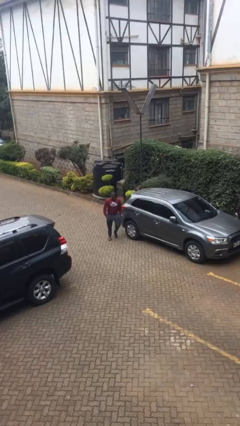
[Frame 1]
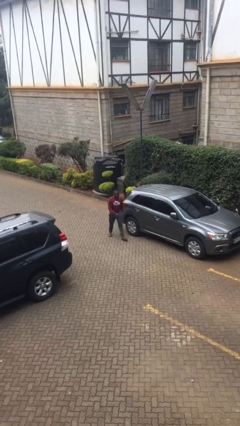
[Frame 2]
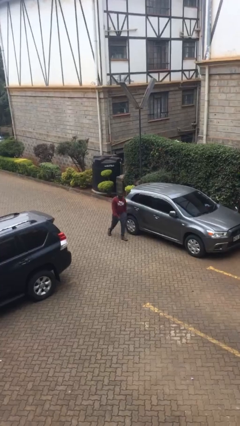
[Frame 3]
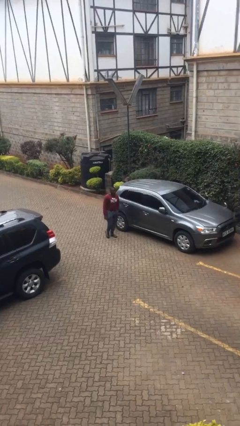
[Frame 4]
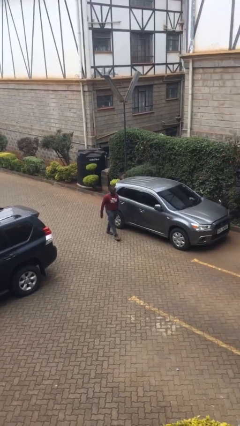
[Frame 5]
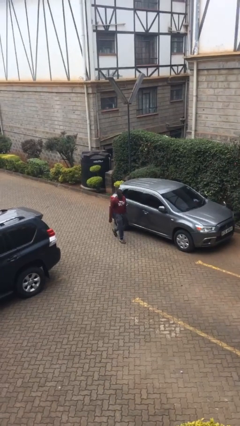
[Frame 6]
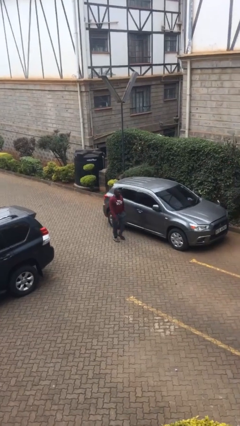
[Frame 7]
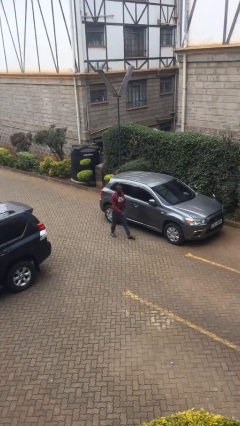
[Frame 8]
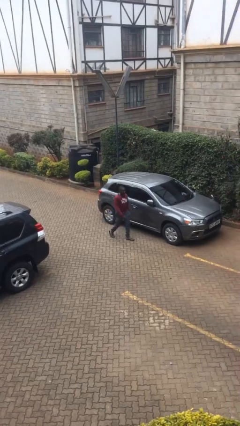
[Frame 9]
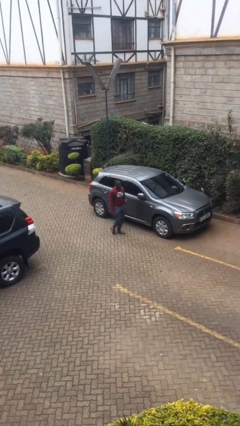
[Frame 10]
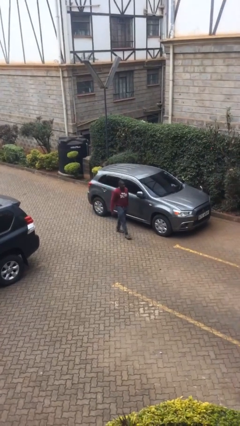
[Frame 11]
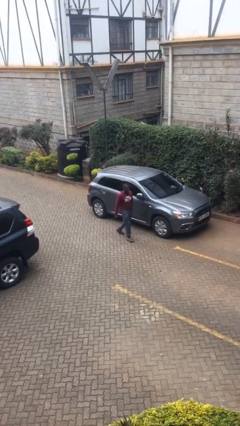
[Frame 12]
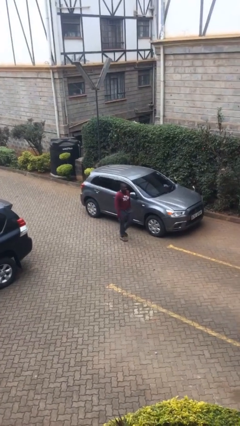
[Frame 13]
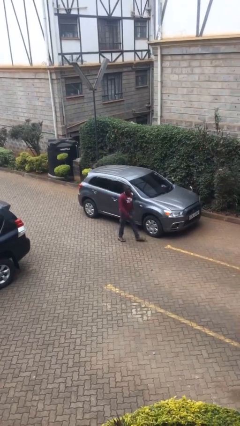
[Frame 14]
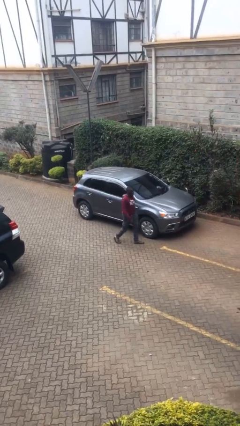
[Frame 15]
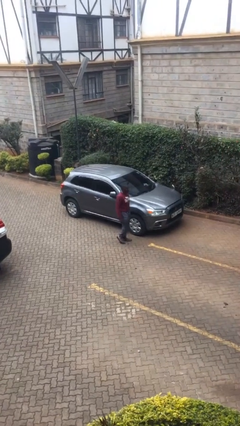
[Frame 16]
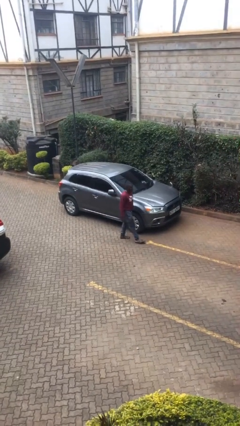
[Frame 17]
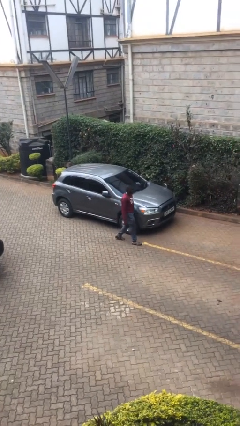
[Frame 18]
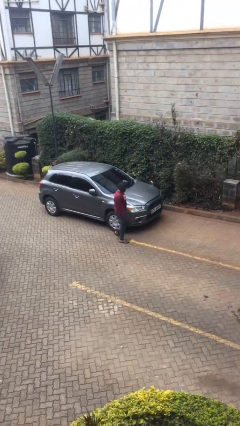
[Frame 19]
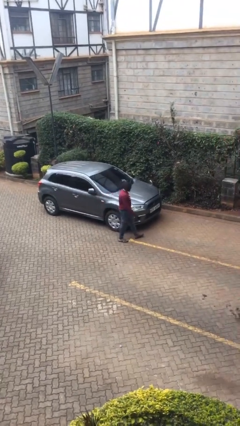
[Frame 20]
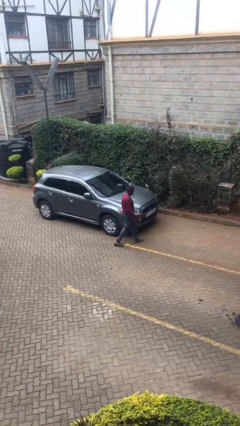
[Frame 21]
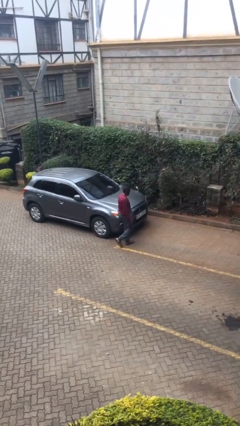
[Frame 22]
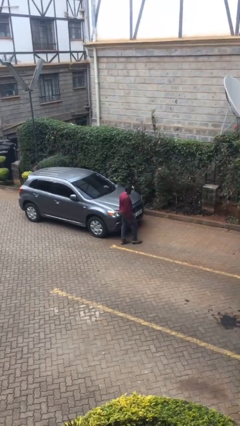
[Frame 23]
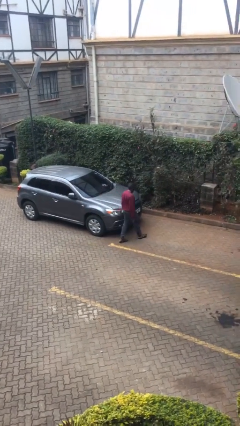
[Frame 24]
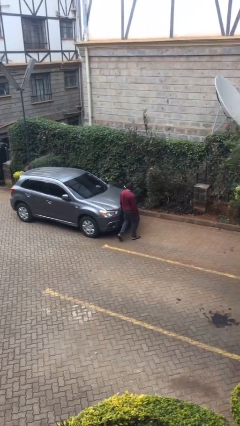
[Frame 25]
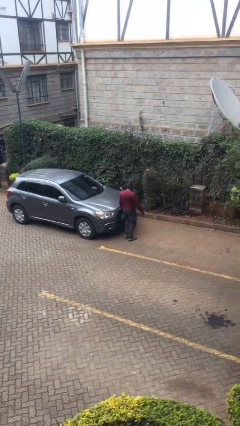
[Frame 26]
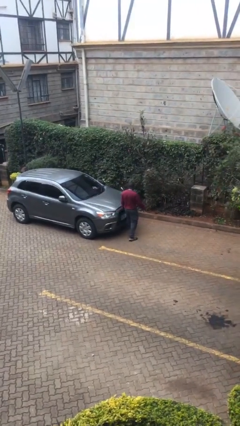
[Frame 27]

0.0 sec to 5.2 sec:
person walks around car

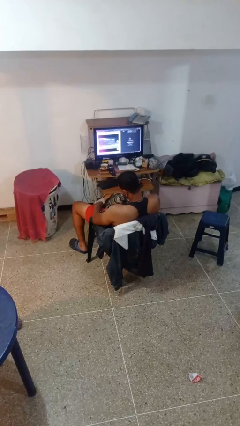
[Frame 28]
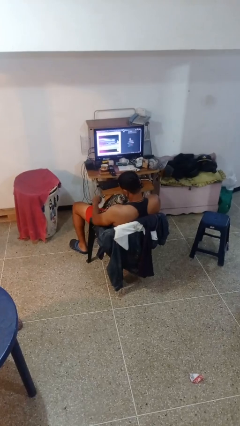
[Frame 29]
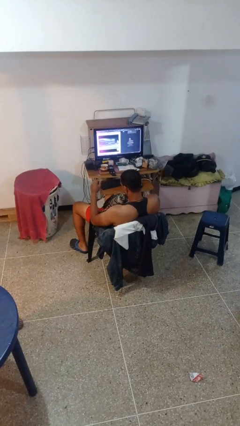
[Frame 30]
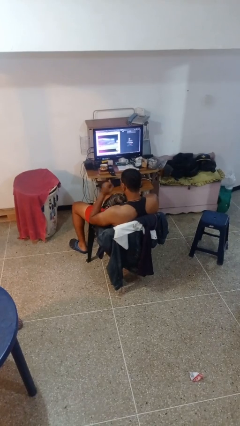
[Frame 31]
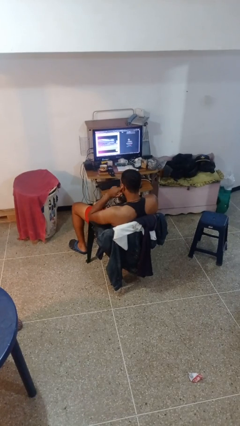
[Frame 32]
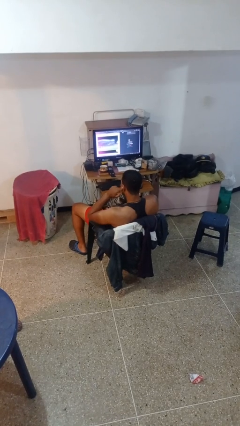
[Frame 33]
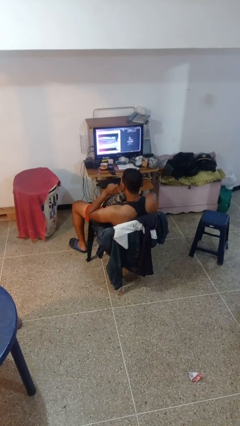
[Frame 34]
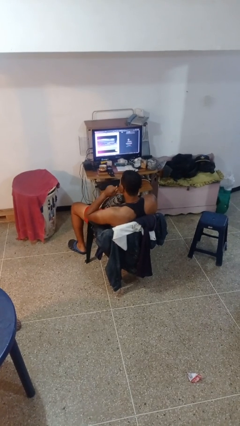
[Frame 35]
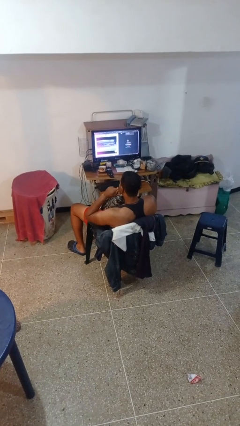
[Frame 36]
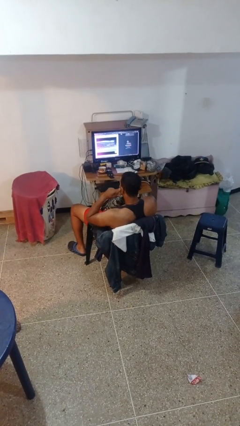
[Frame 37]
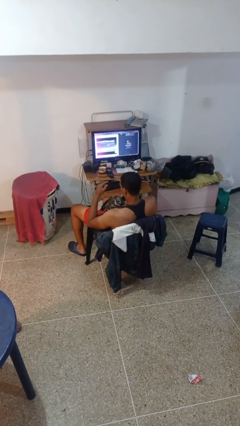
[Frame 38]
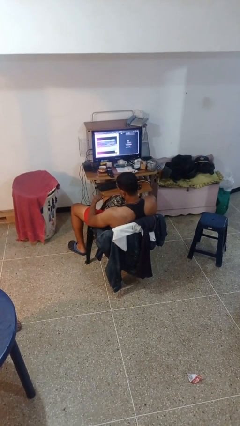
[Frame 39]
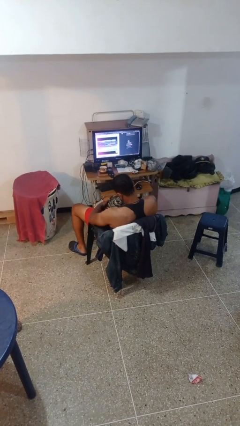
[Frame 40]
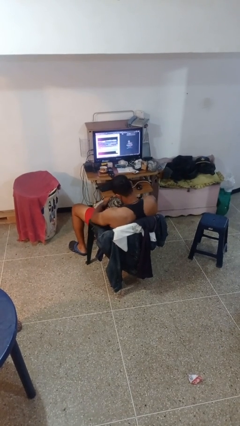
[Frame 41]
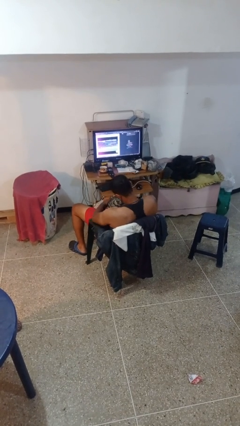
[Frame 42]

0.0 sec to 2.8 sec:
person gestures listen closely

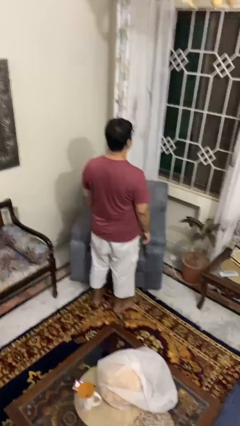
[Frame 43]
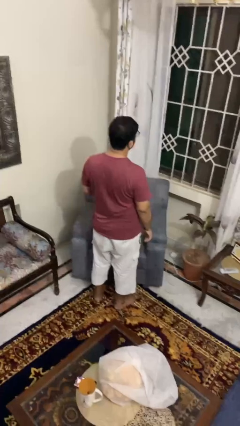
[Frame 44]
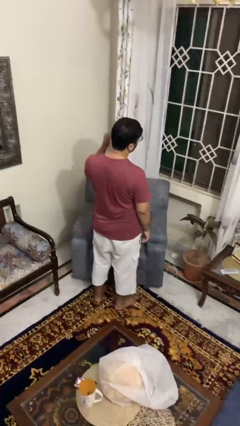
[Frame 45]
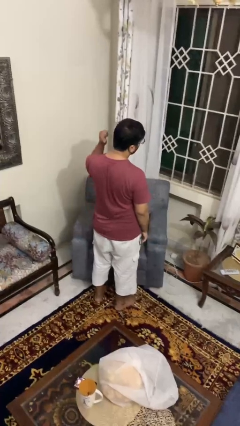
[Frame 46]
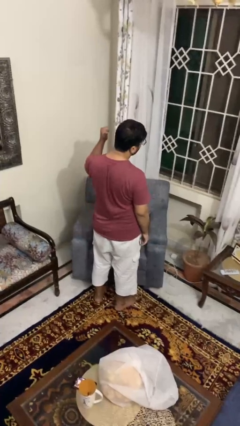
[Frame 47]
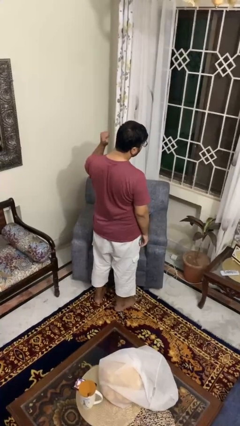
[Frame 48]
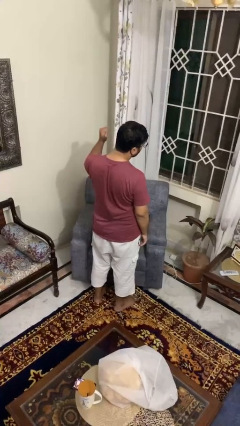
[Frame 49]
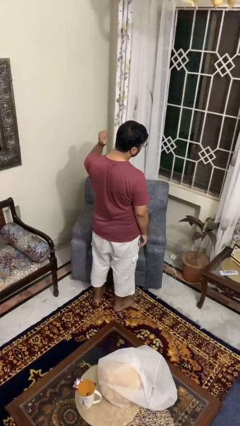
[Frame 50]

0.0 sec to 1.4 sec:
person gestures behind me

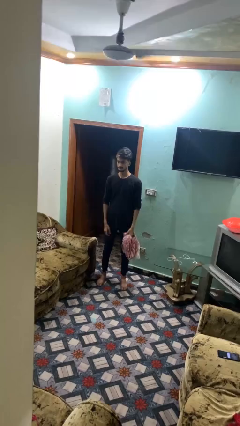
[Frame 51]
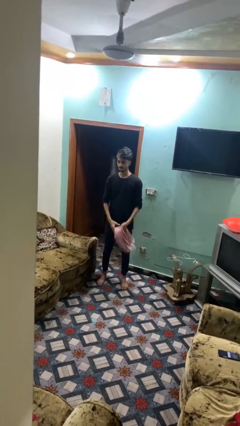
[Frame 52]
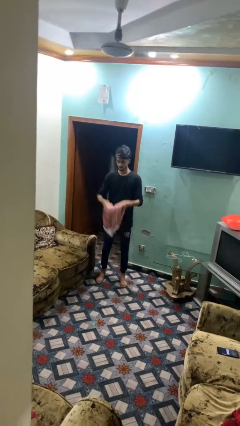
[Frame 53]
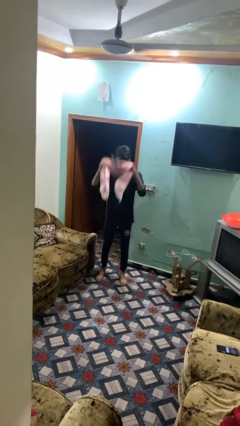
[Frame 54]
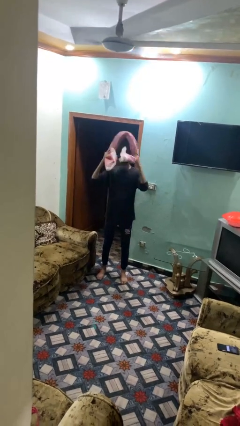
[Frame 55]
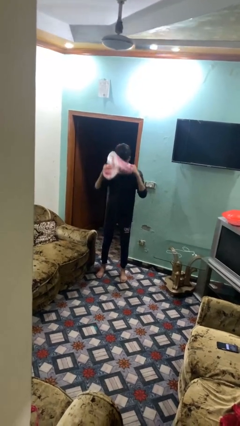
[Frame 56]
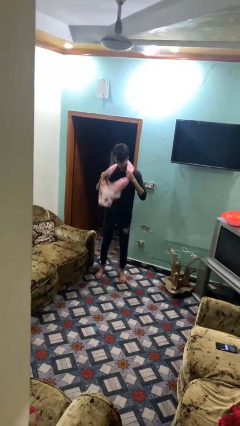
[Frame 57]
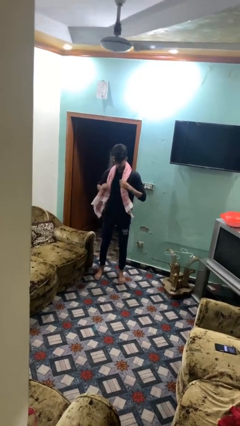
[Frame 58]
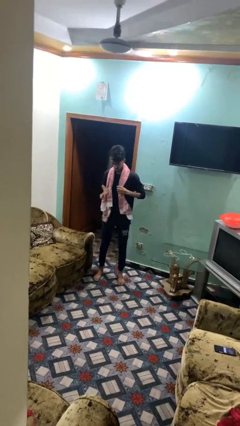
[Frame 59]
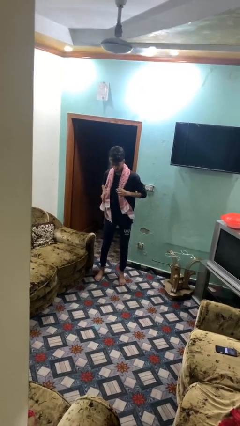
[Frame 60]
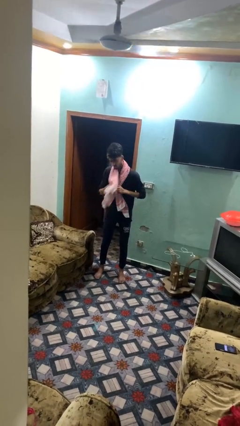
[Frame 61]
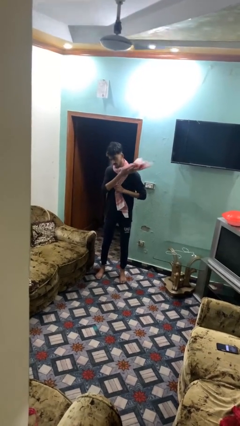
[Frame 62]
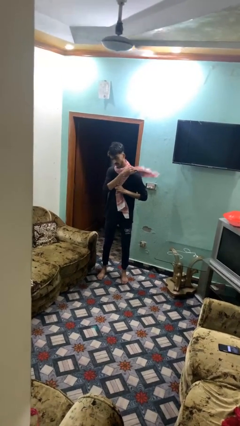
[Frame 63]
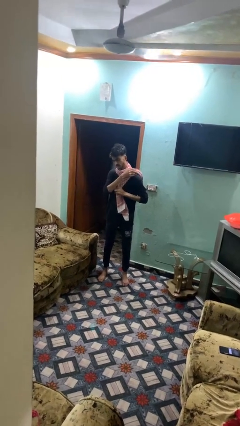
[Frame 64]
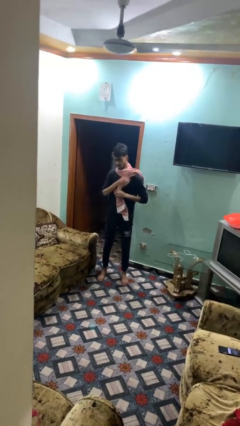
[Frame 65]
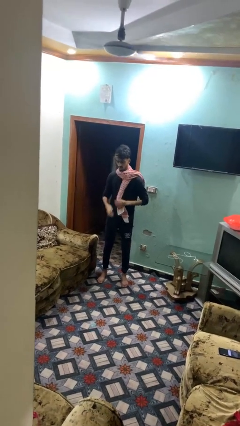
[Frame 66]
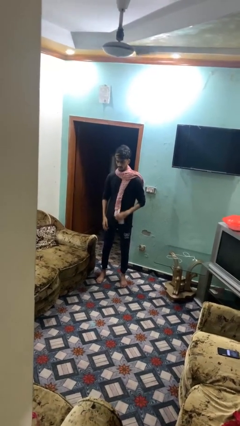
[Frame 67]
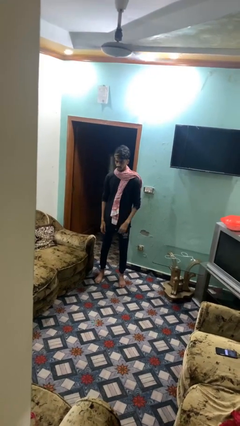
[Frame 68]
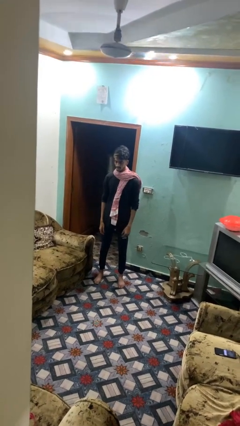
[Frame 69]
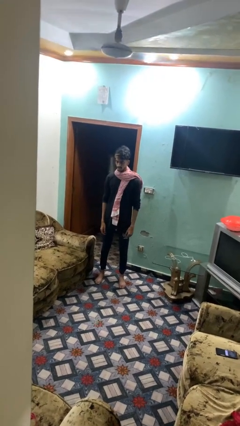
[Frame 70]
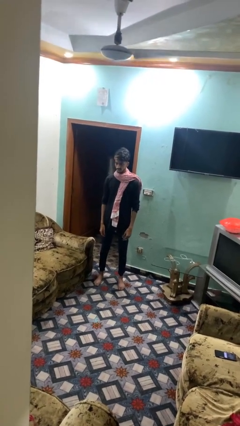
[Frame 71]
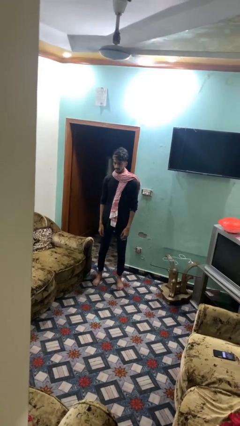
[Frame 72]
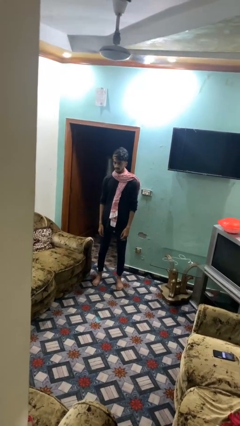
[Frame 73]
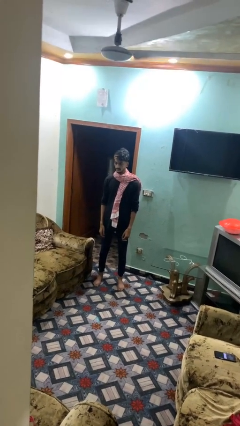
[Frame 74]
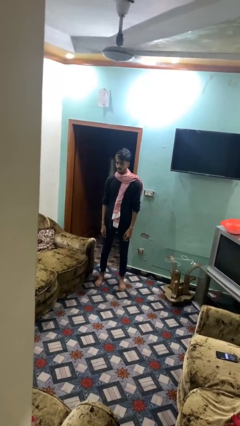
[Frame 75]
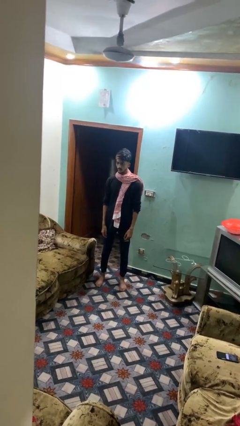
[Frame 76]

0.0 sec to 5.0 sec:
person puts on scarf

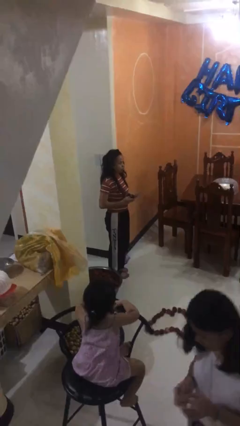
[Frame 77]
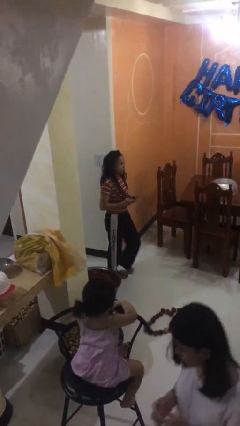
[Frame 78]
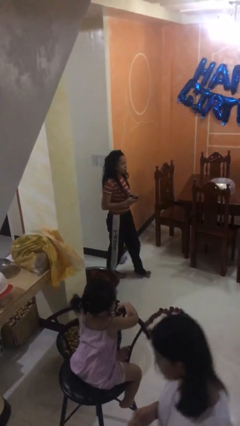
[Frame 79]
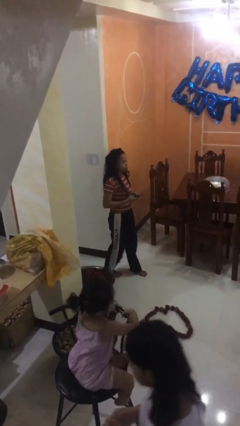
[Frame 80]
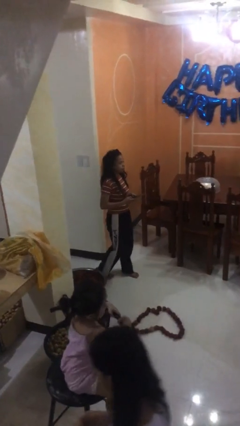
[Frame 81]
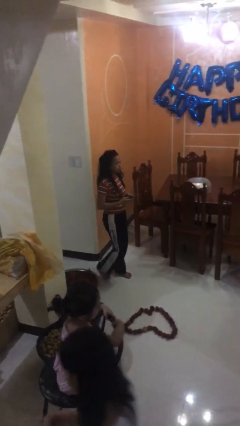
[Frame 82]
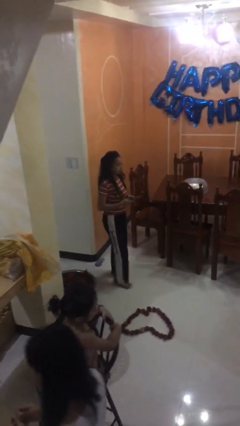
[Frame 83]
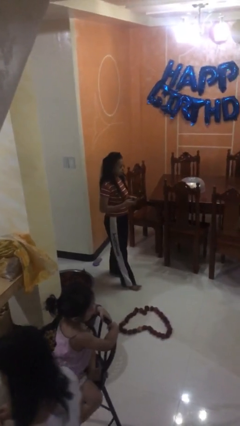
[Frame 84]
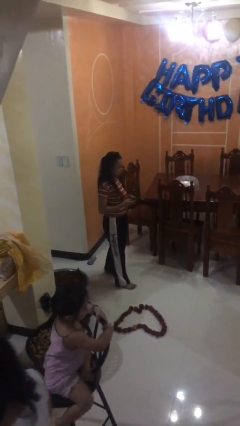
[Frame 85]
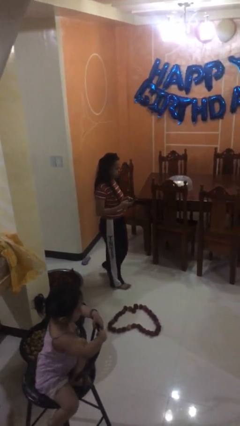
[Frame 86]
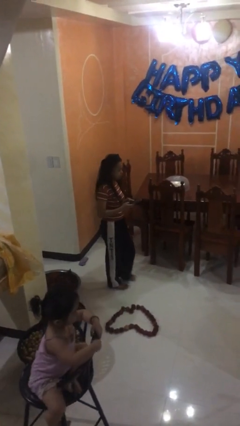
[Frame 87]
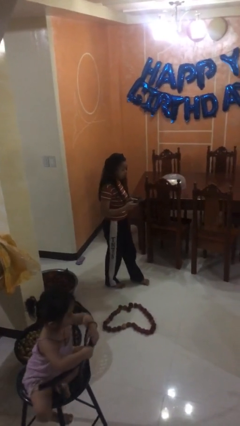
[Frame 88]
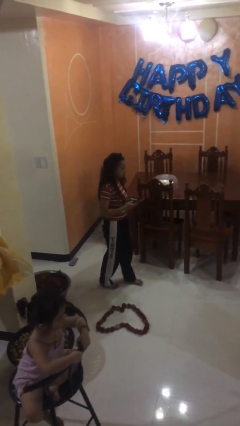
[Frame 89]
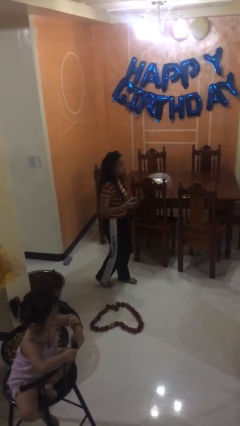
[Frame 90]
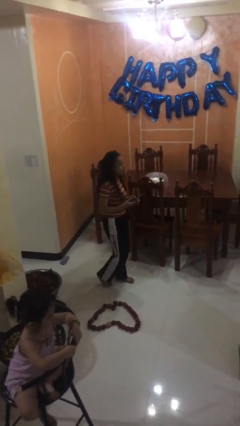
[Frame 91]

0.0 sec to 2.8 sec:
person texts on phone
